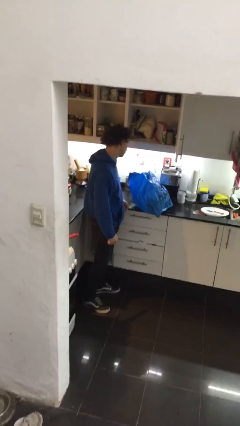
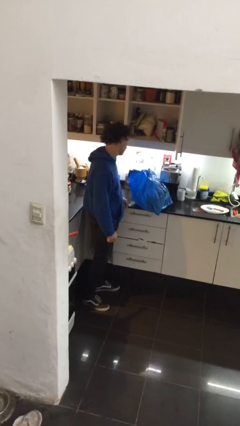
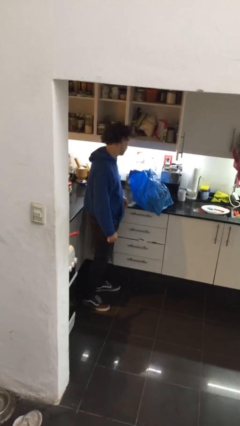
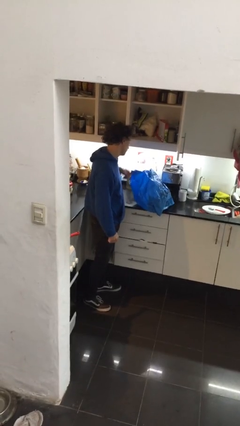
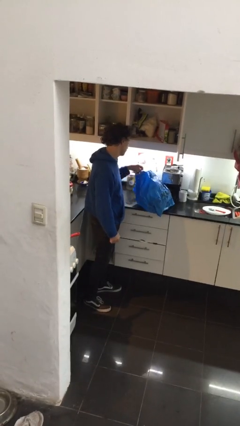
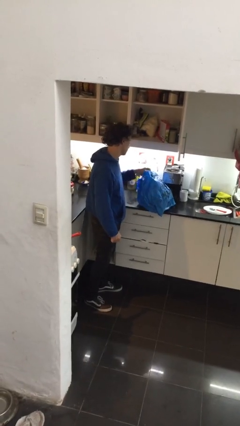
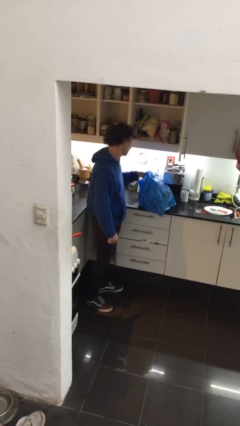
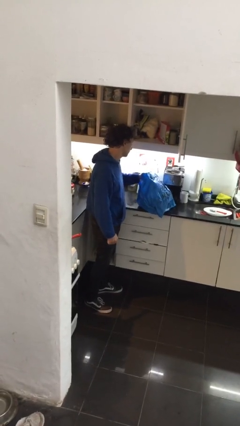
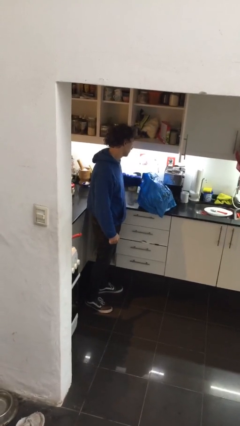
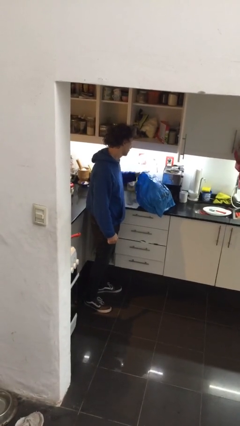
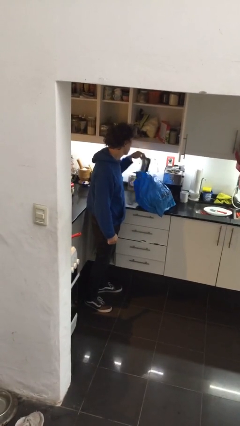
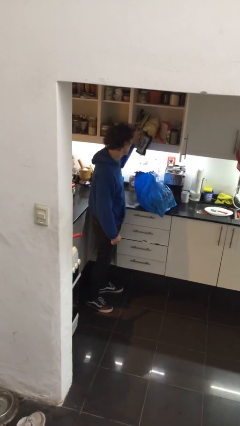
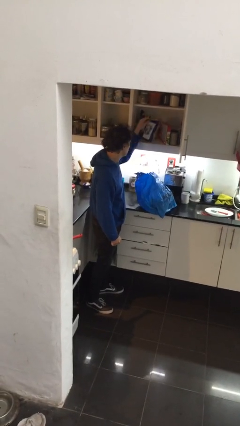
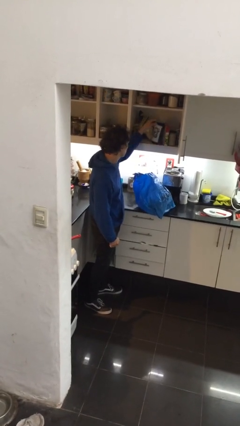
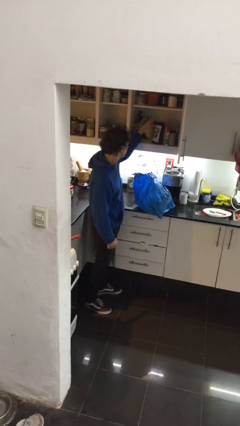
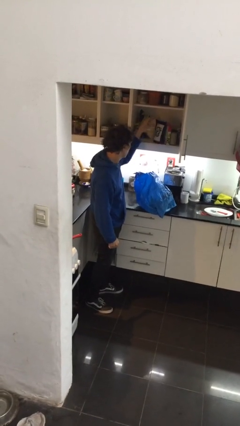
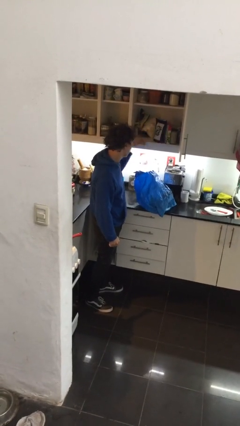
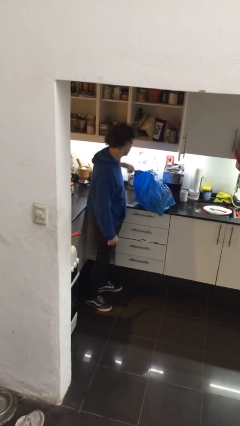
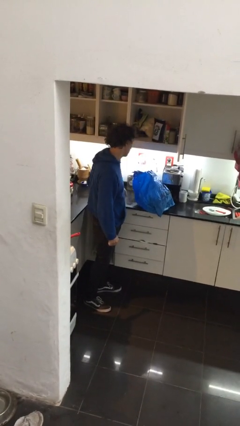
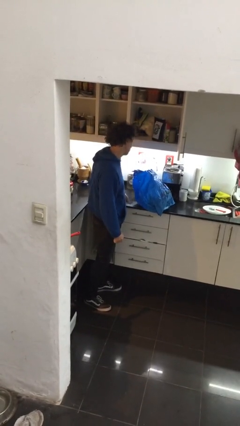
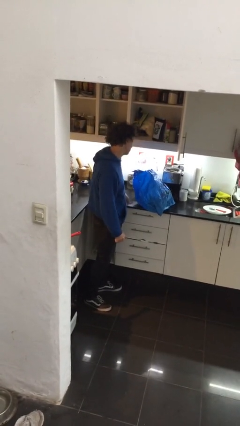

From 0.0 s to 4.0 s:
person loads groceries into cabinet

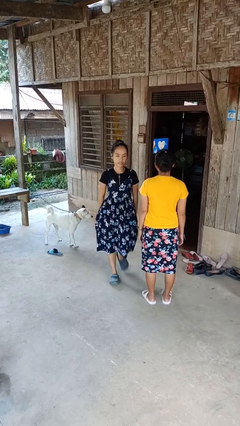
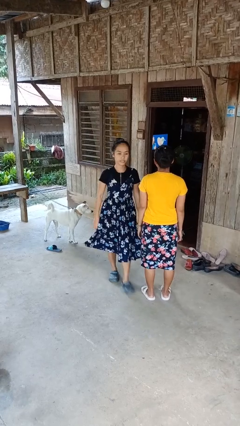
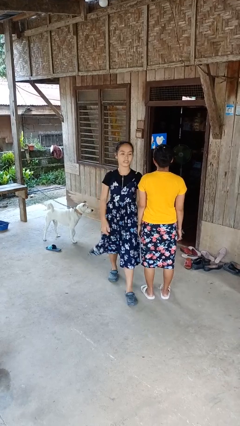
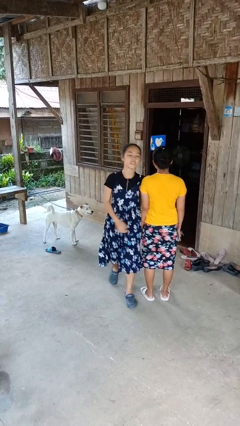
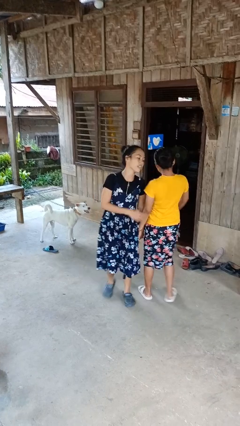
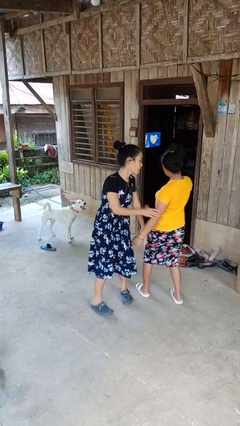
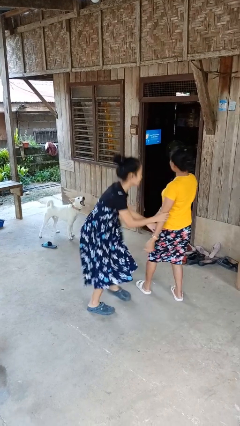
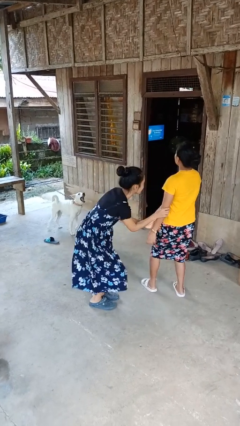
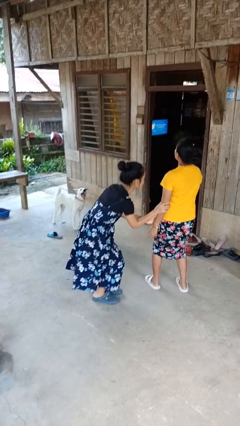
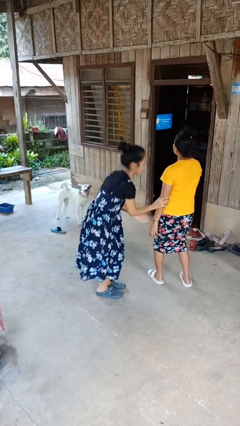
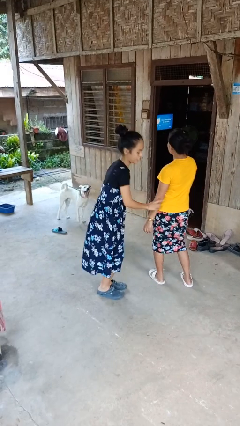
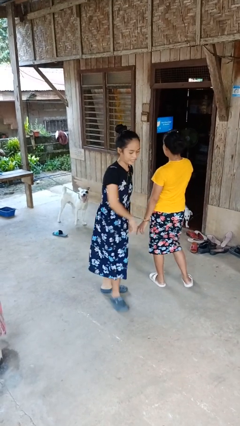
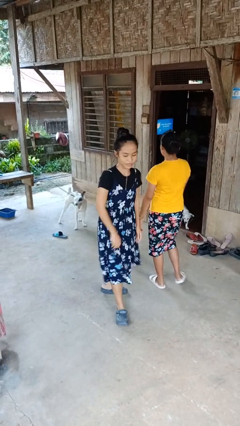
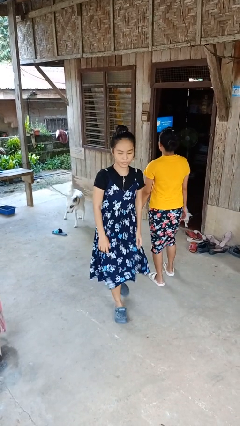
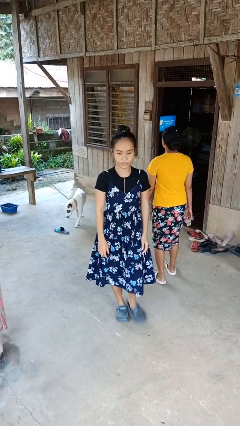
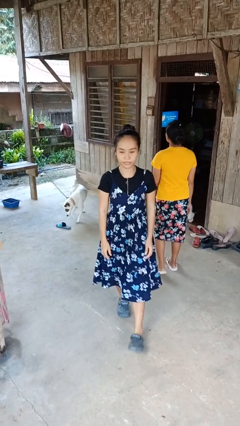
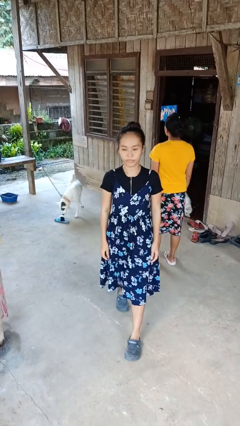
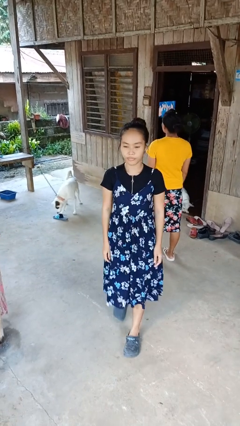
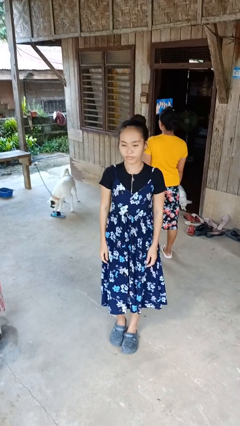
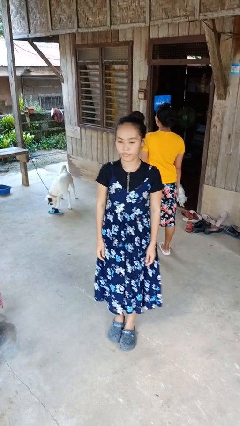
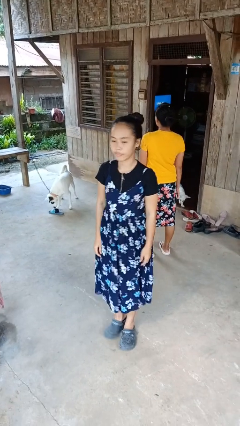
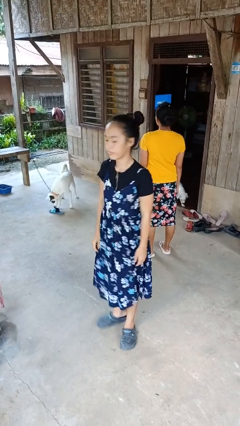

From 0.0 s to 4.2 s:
person bumps into person

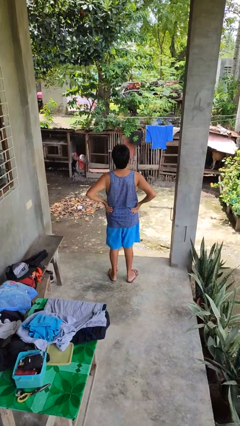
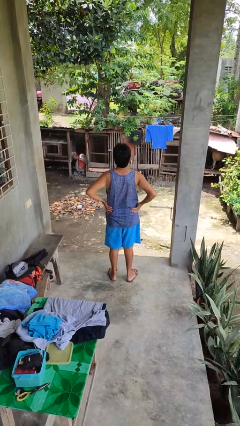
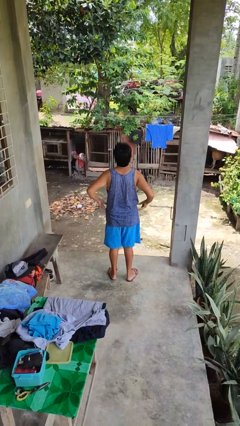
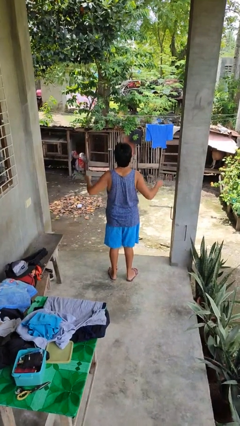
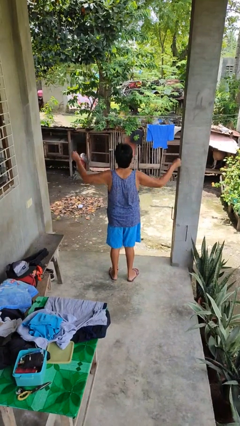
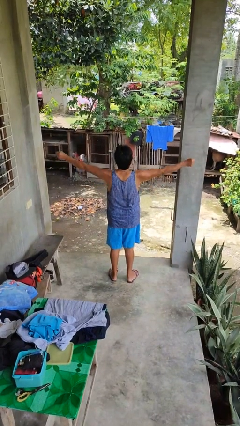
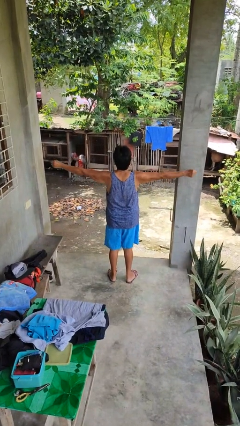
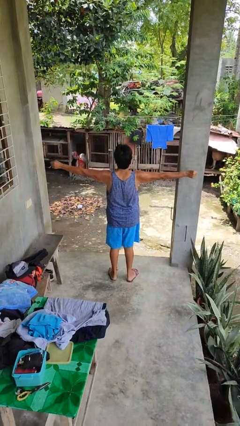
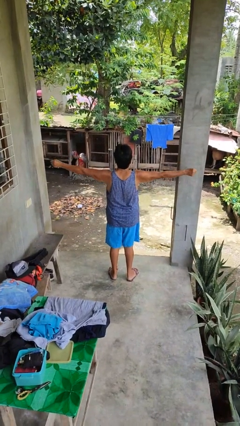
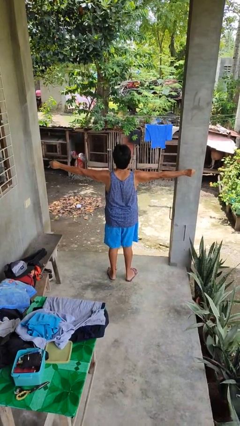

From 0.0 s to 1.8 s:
person stretches arms to side

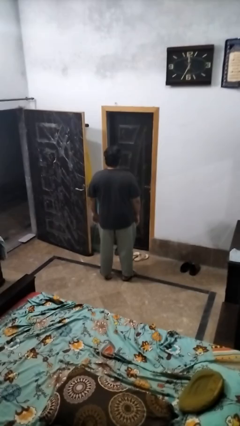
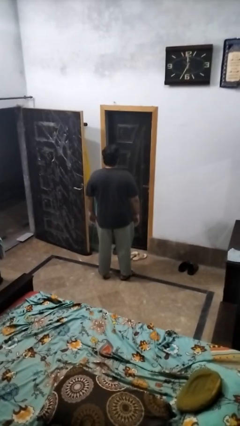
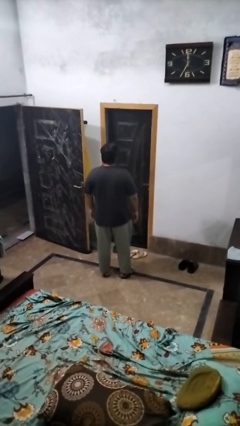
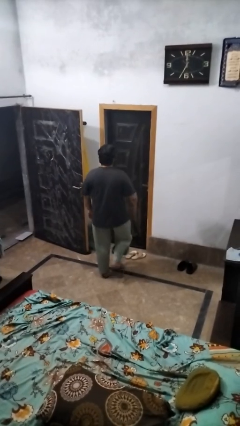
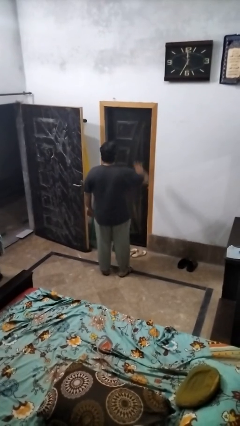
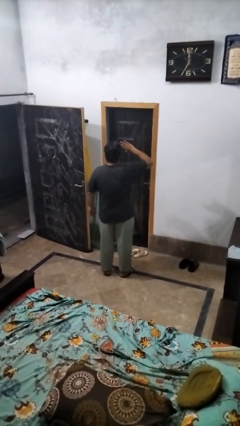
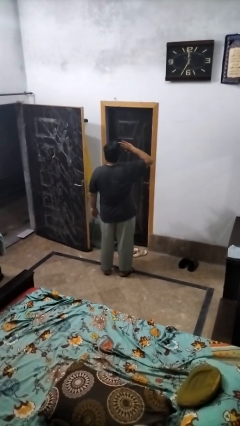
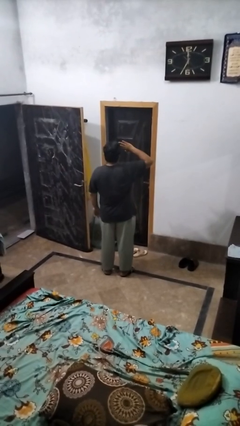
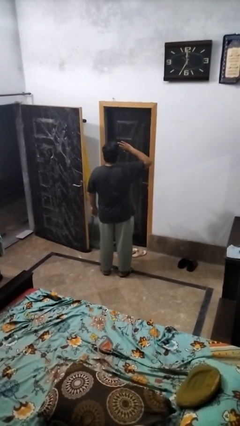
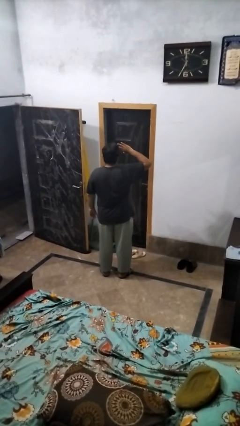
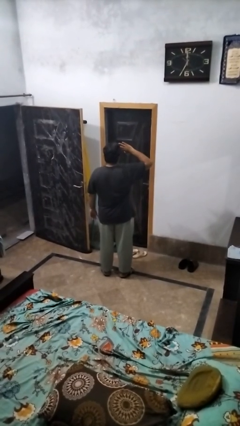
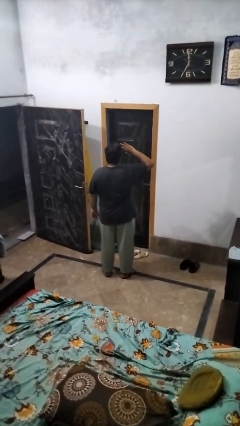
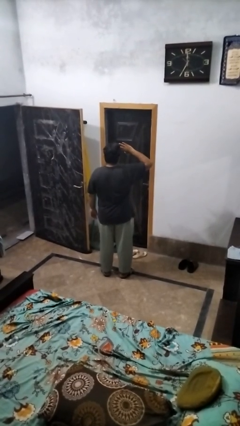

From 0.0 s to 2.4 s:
person salutes

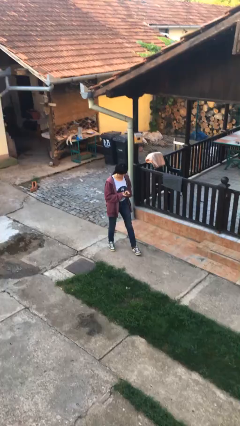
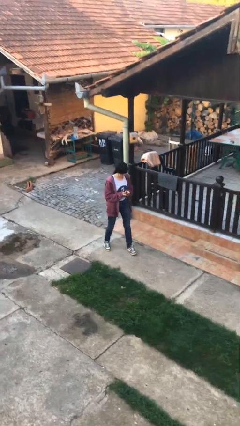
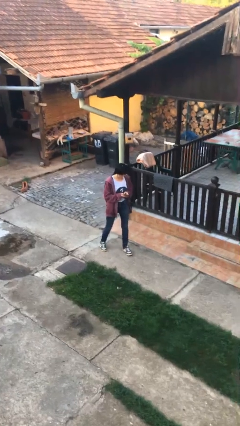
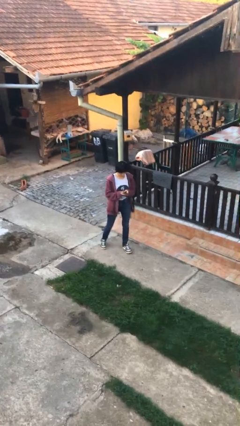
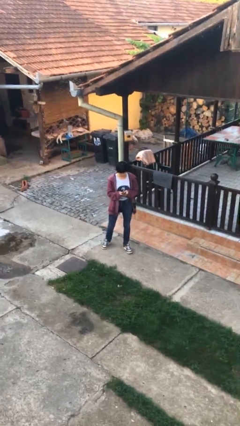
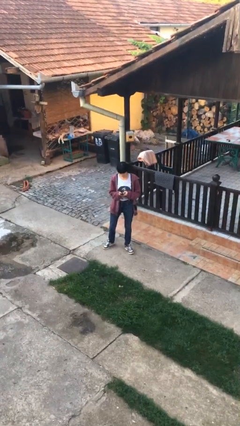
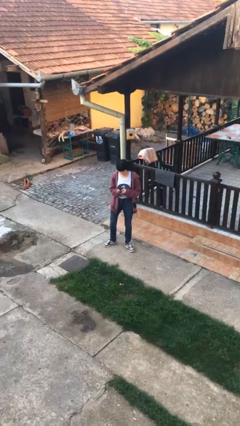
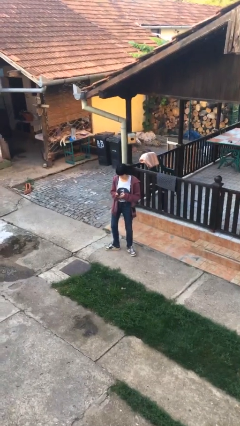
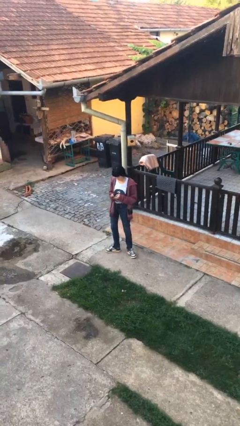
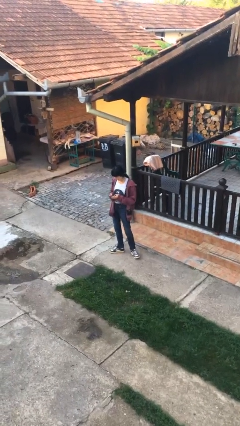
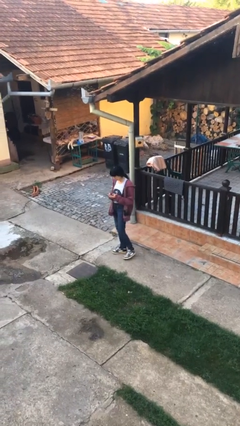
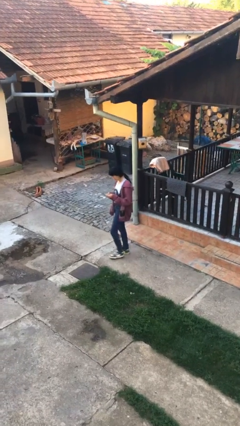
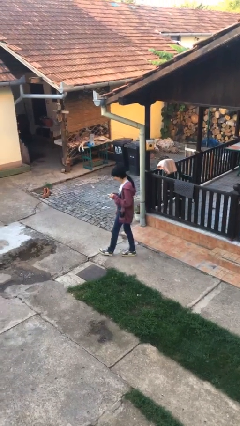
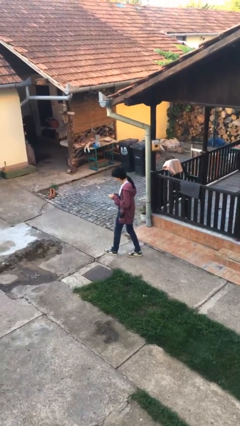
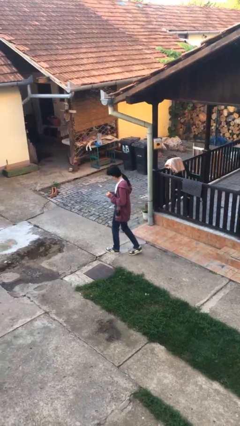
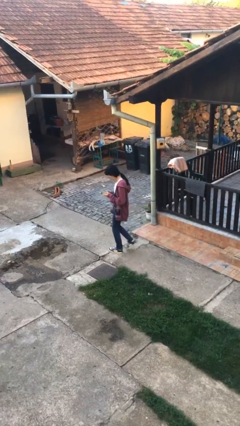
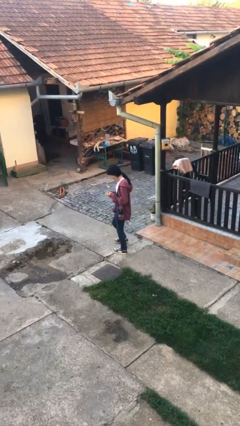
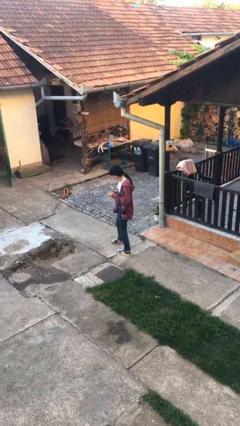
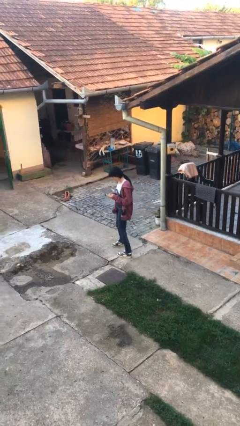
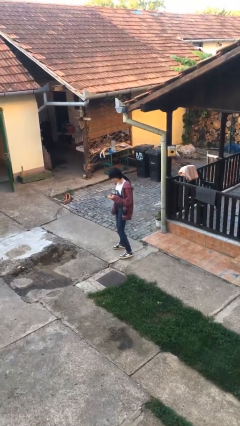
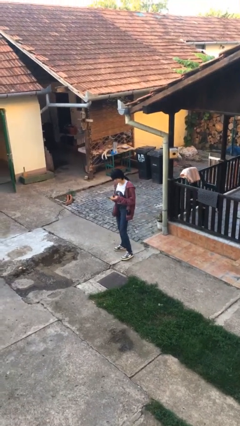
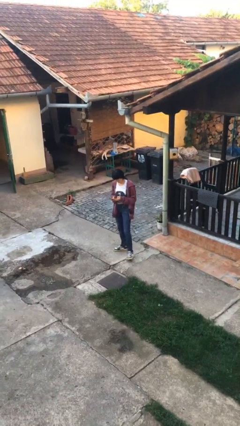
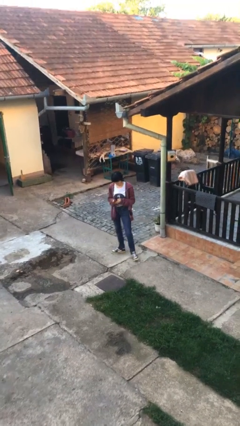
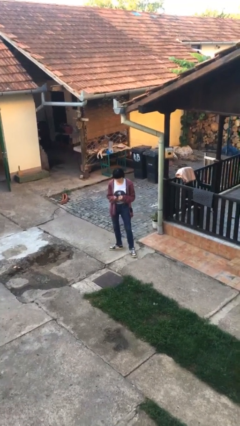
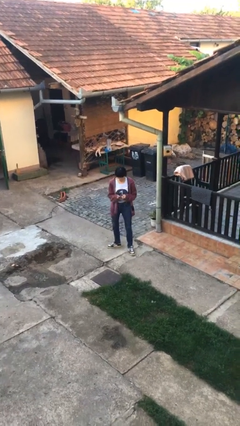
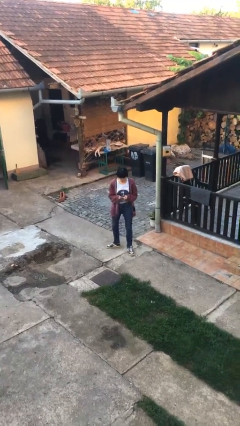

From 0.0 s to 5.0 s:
person texts on phone

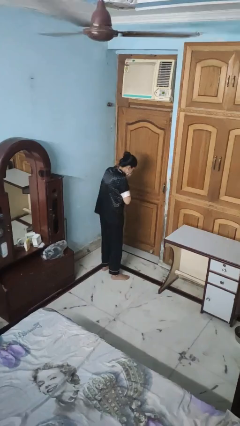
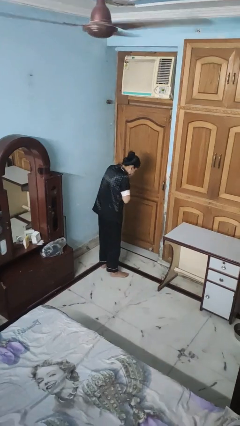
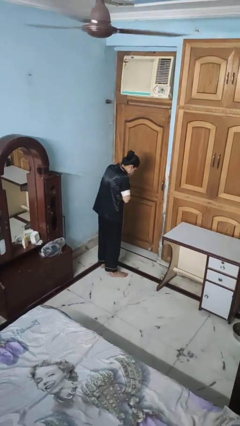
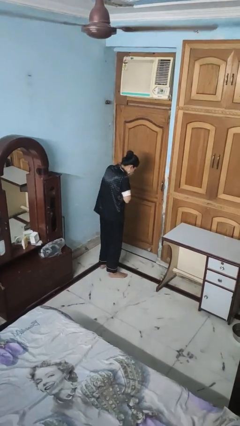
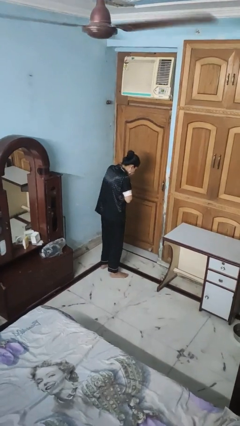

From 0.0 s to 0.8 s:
person sneezes into hand
